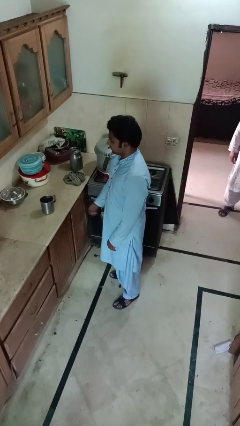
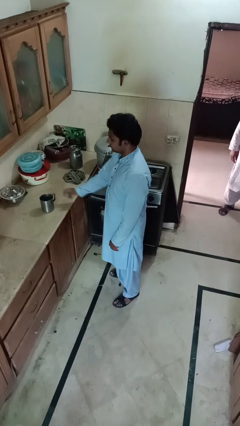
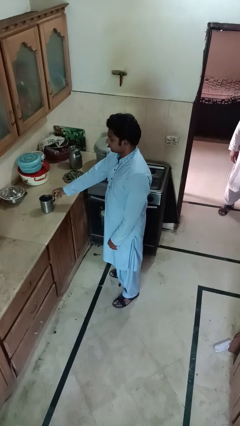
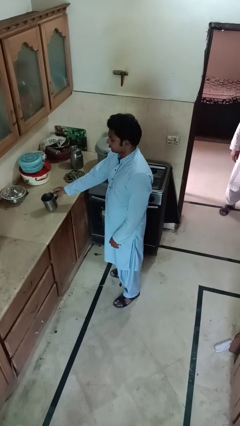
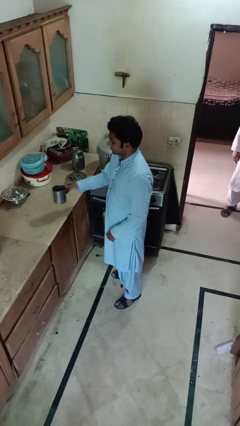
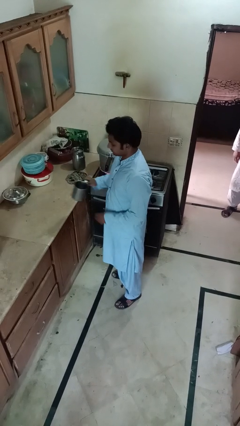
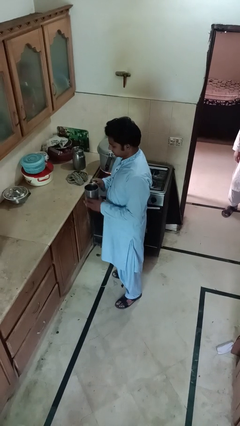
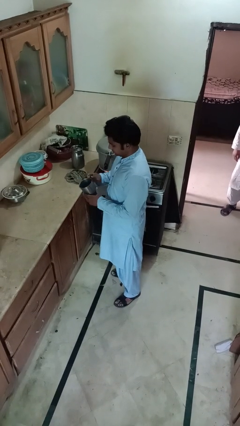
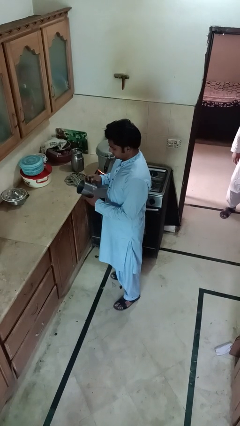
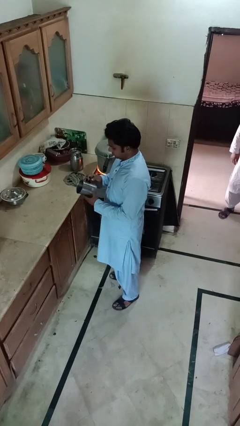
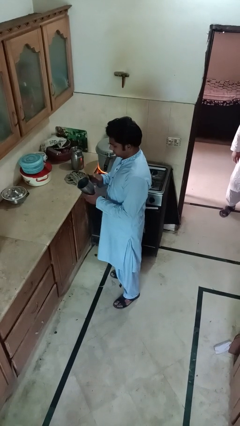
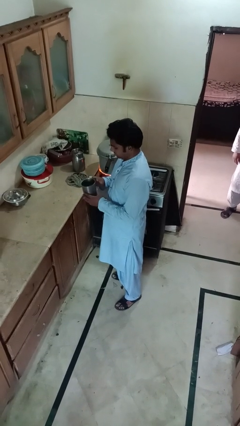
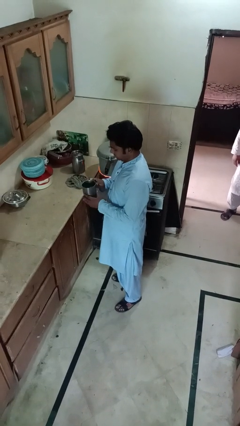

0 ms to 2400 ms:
person picks up object from countertop

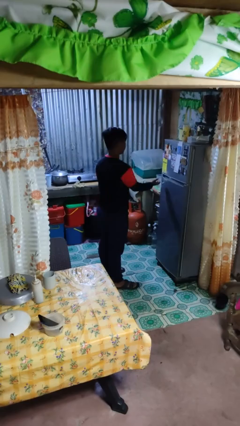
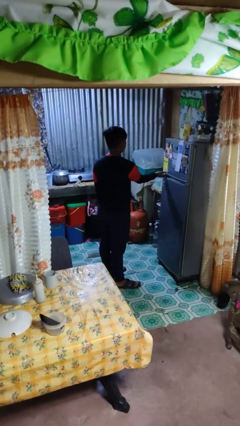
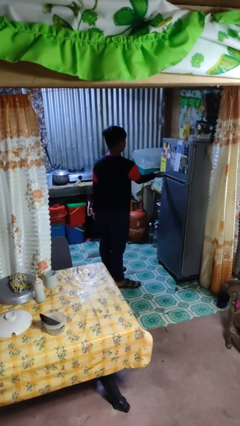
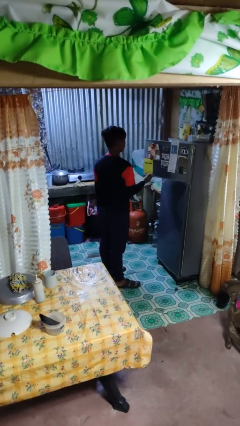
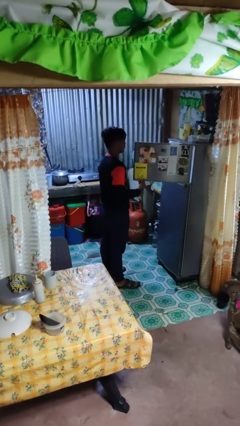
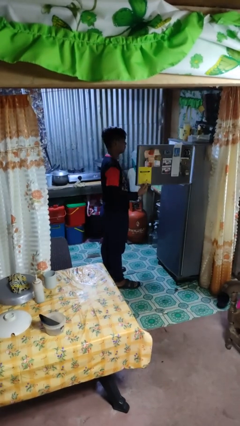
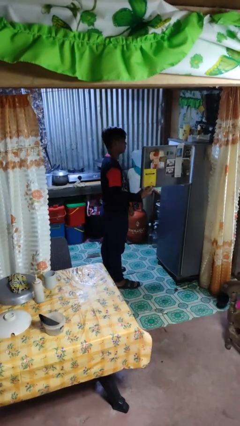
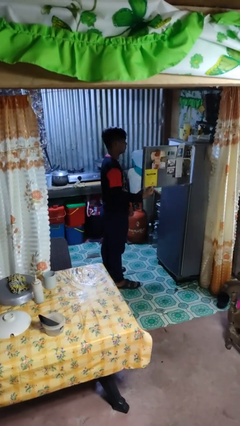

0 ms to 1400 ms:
person opens refrigerator

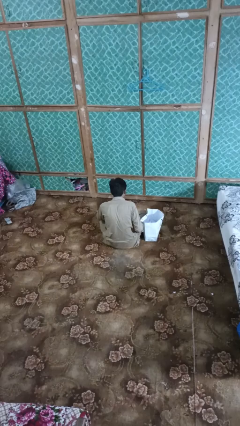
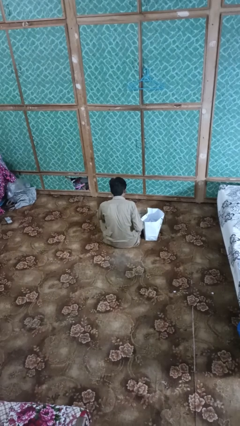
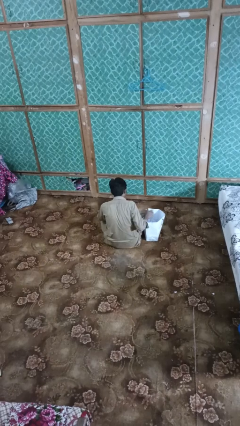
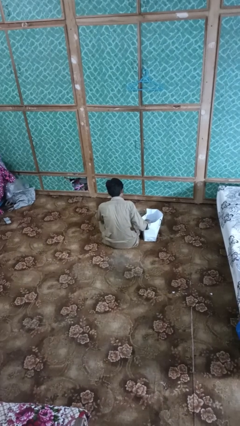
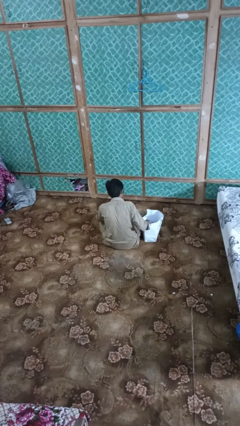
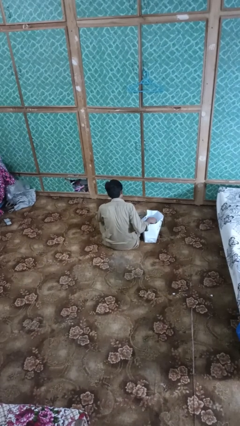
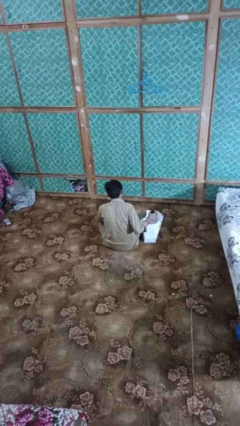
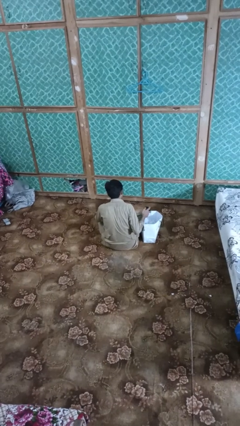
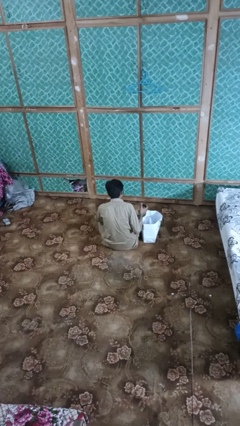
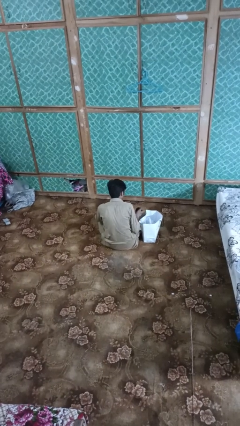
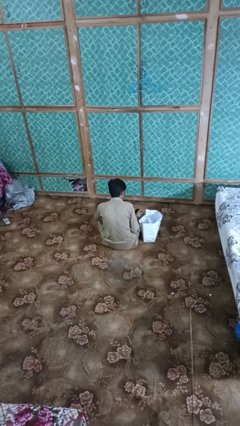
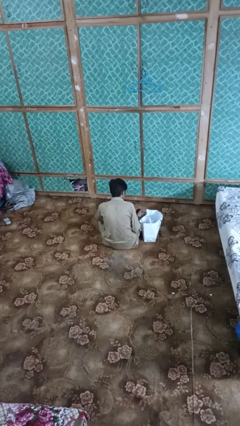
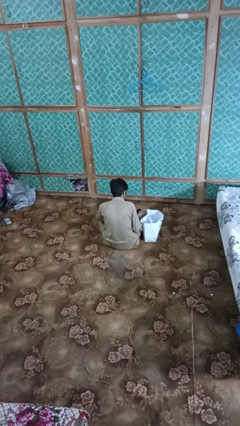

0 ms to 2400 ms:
person takes object from bag

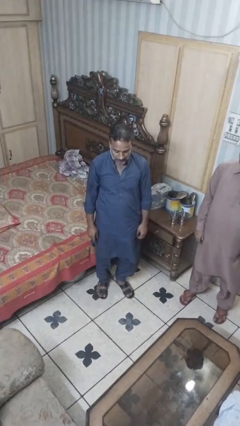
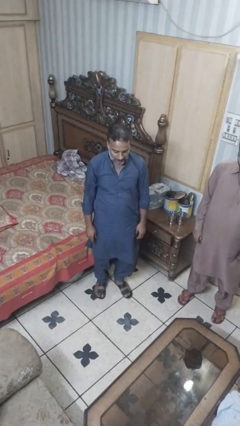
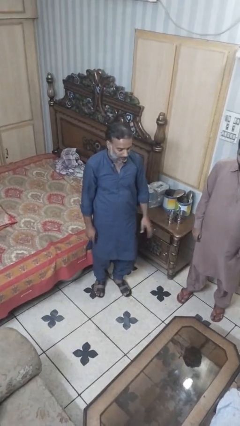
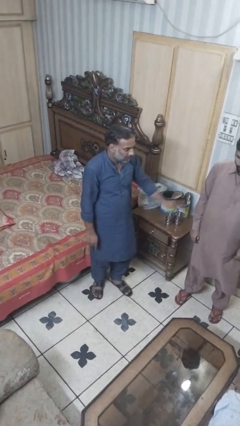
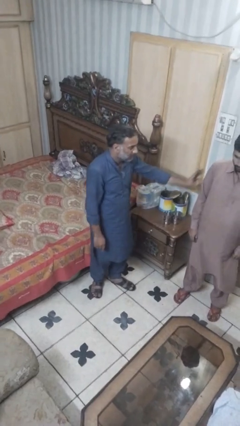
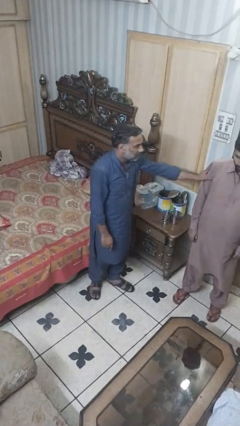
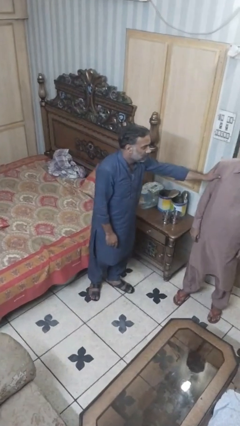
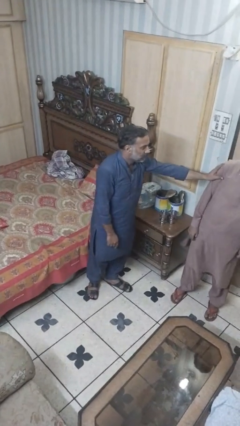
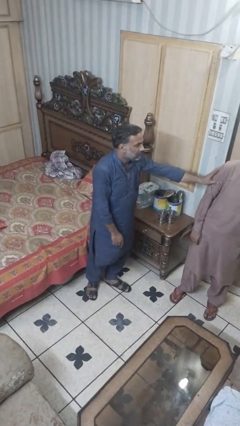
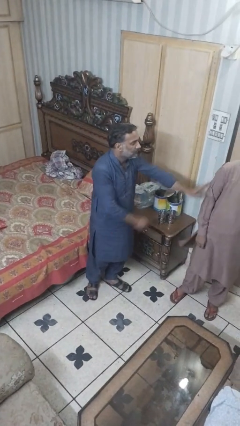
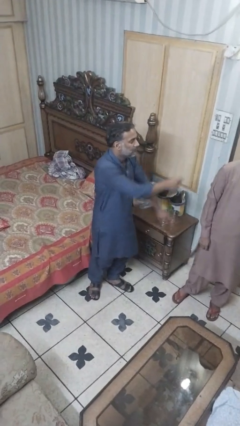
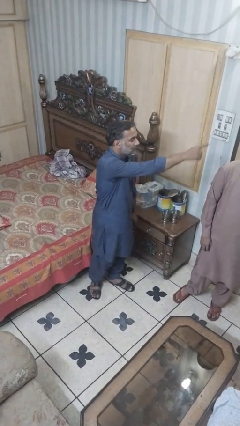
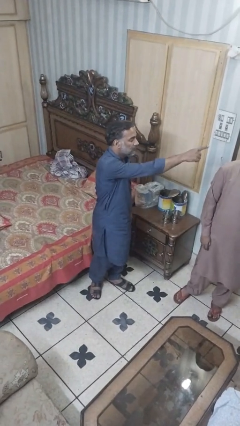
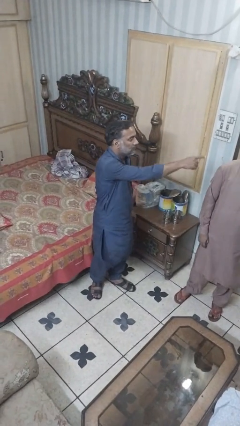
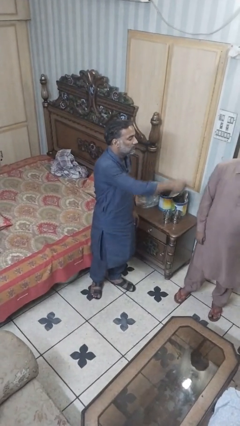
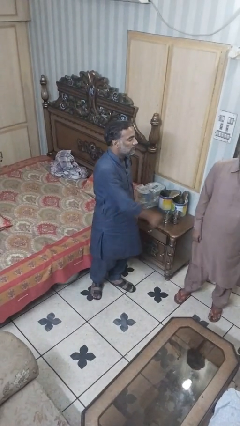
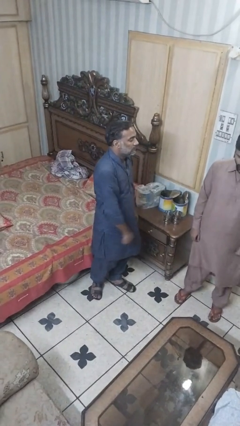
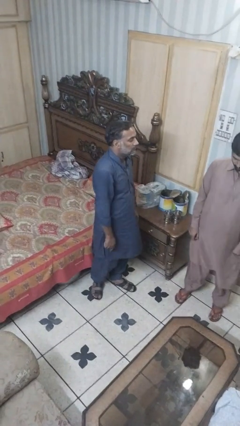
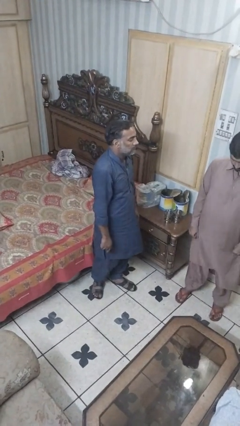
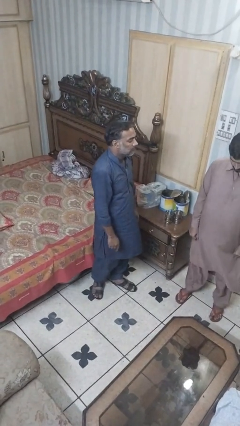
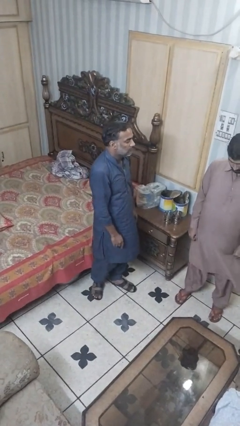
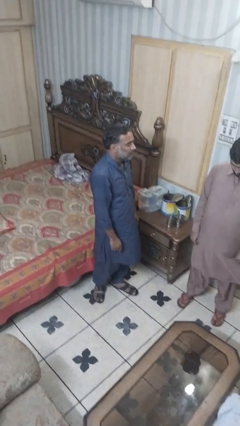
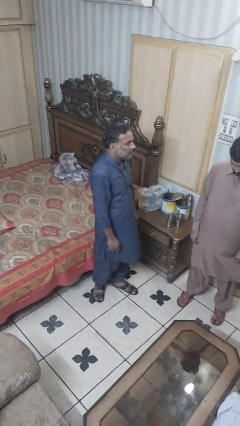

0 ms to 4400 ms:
person shoves person

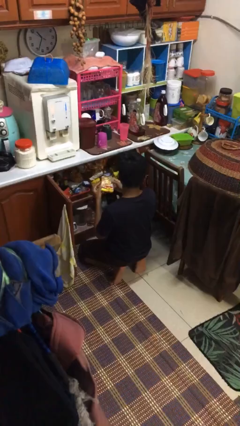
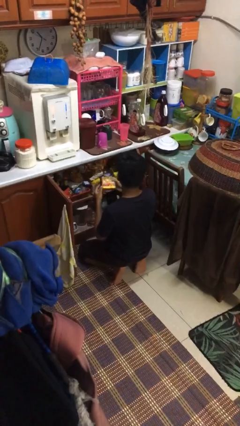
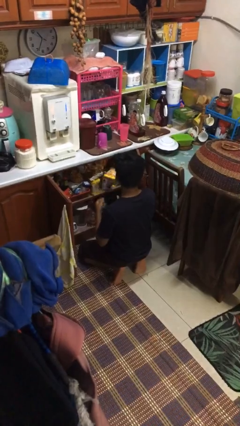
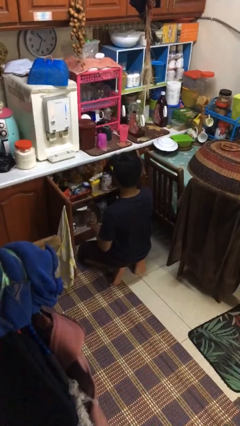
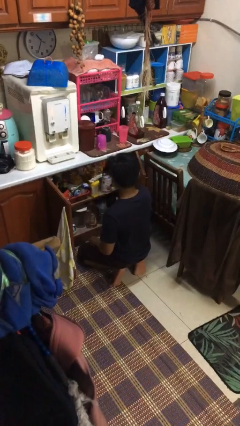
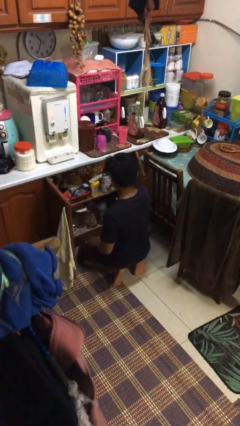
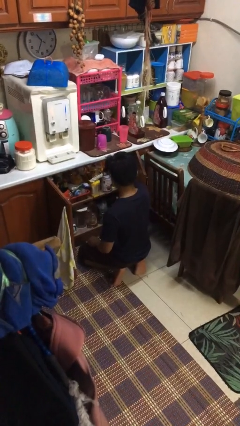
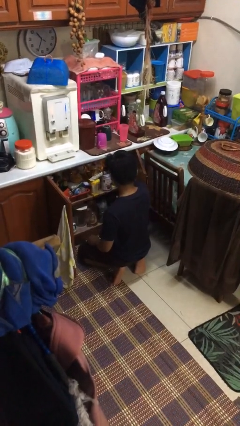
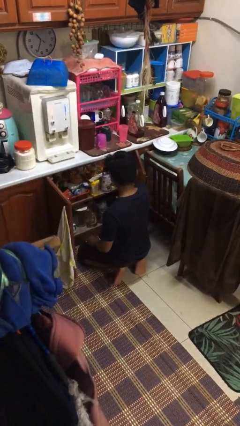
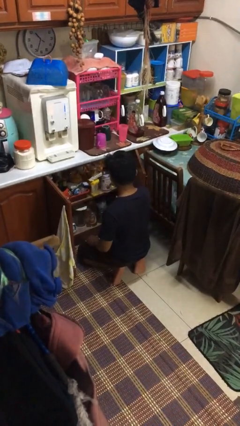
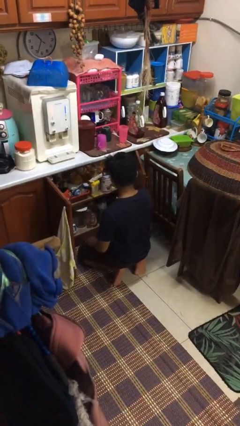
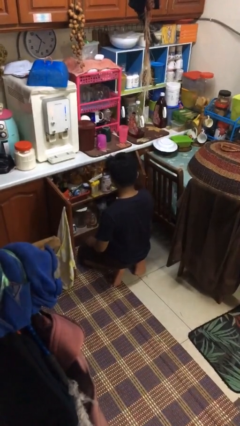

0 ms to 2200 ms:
person puts object in cabinet

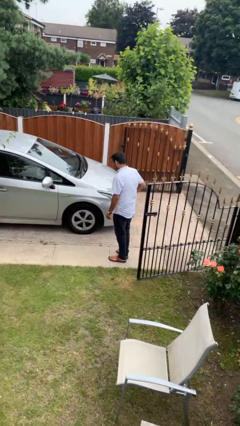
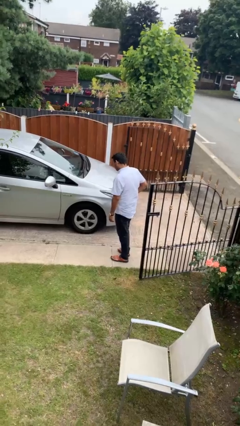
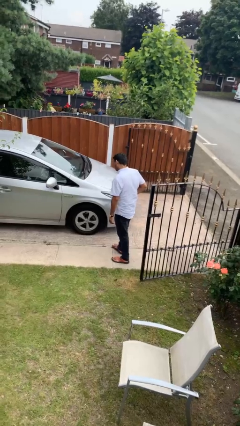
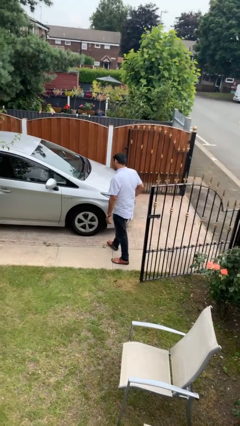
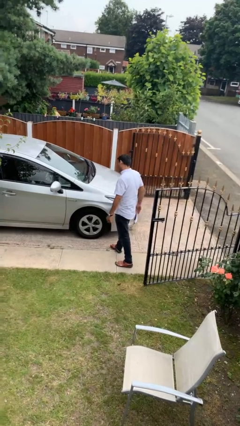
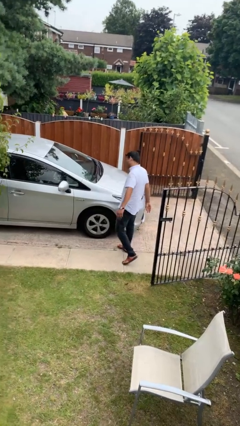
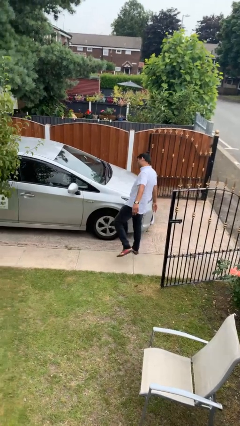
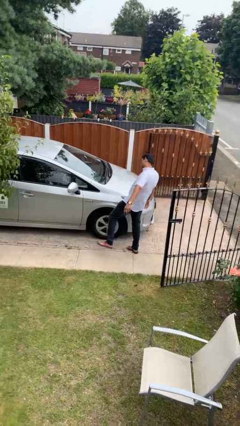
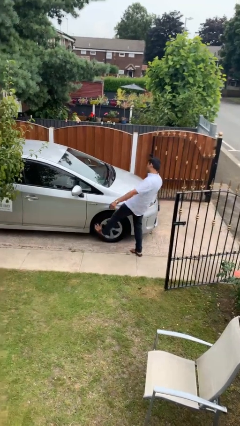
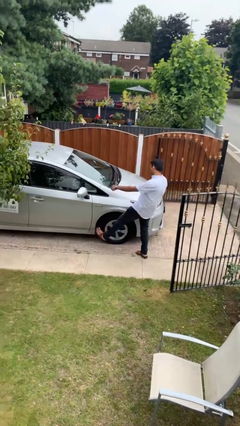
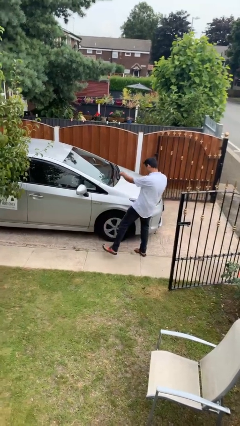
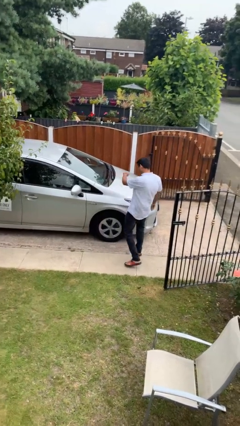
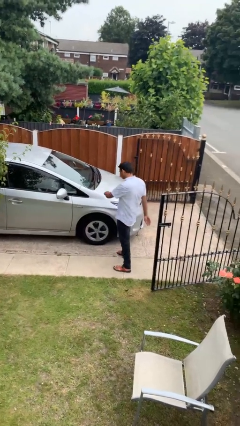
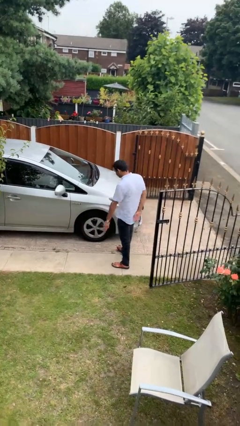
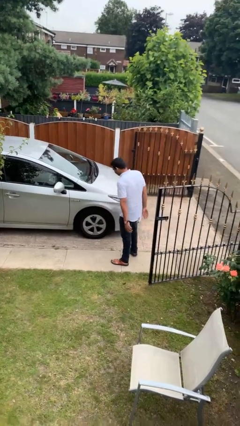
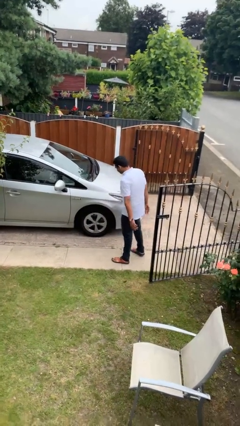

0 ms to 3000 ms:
person kicks car tires

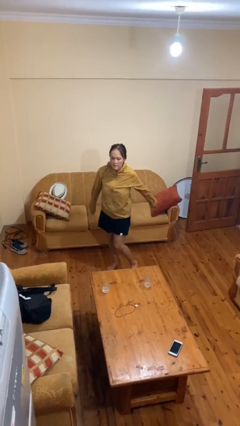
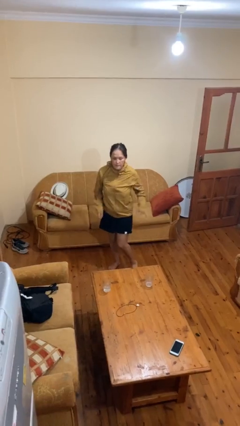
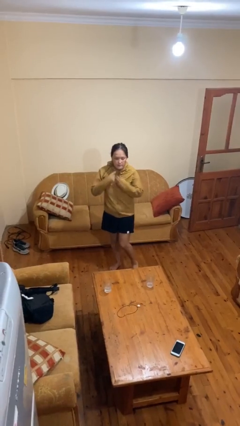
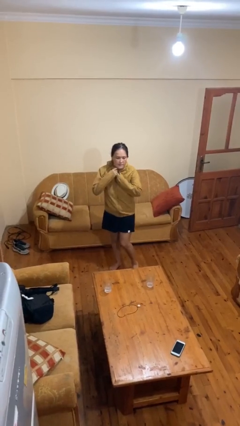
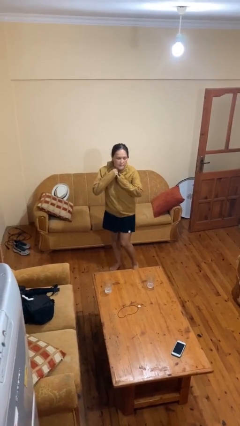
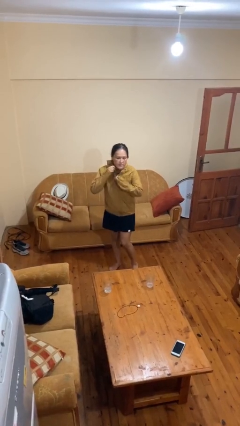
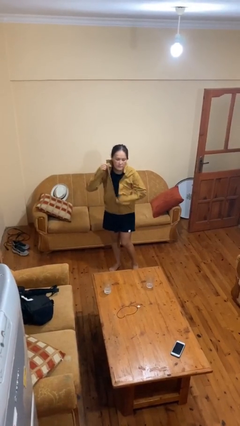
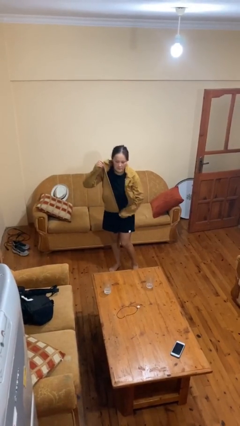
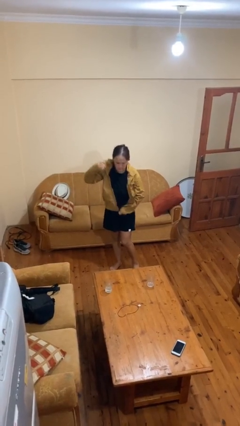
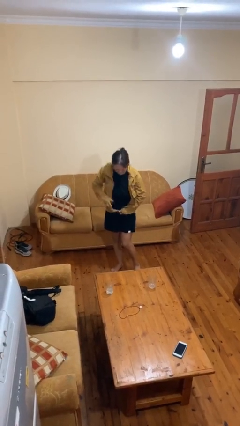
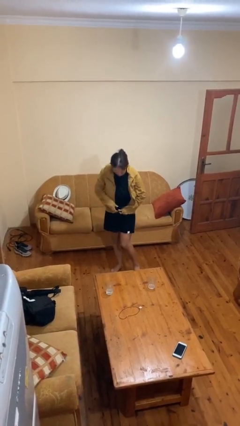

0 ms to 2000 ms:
person unzips jacket
